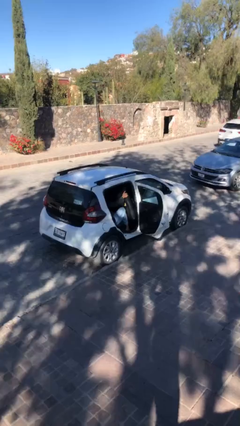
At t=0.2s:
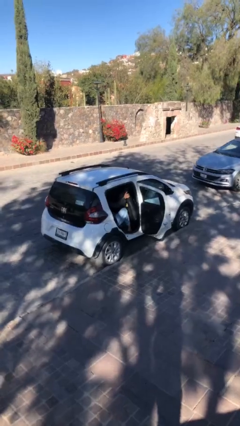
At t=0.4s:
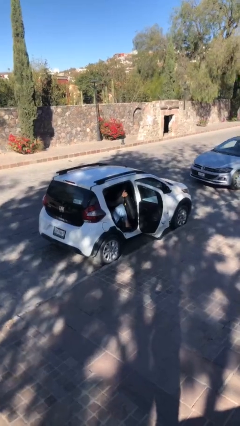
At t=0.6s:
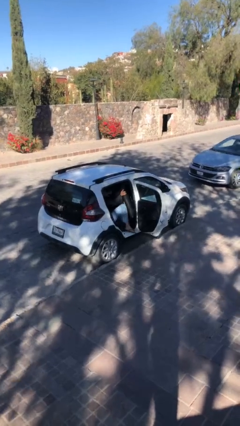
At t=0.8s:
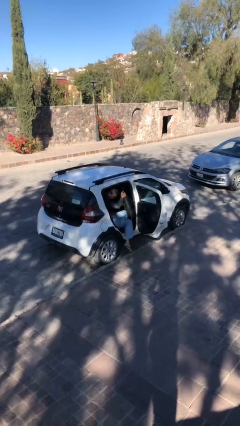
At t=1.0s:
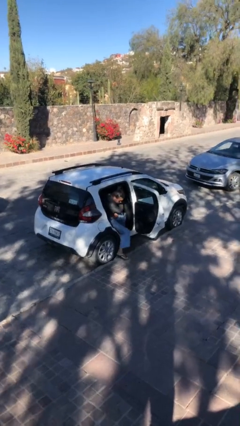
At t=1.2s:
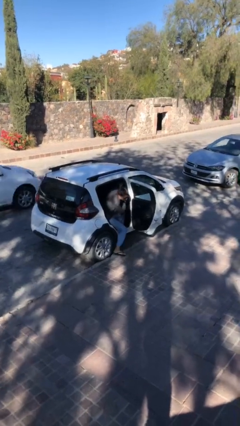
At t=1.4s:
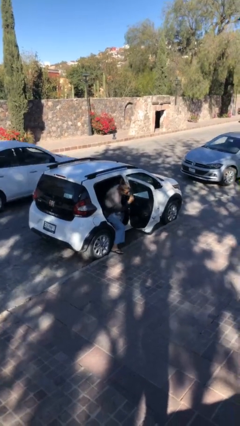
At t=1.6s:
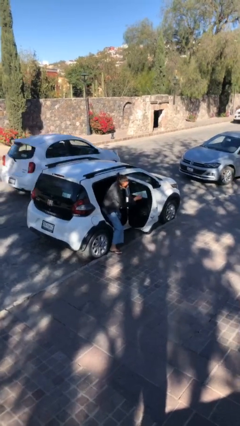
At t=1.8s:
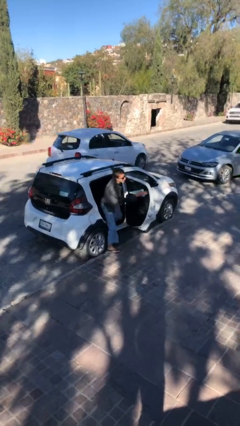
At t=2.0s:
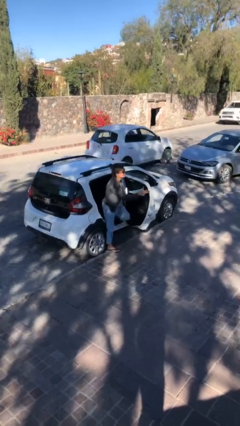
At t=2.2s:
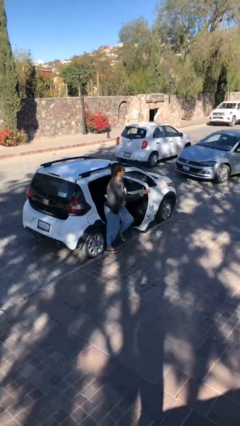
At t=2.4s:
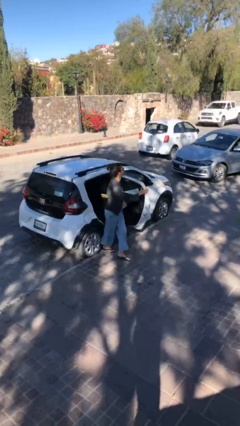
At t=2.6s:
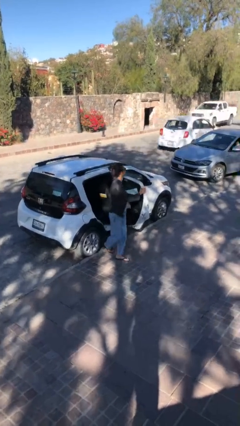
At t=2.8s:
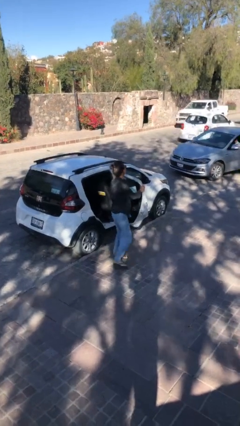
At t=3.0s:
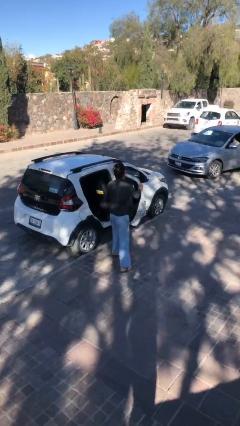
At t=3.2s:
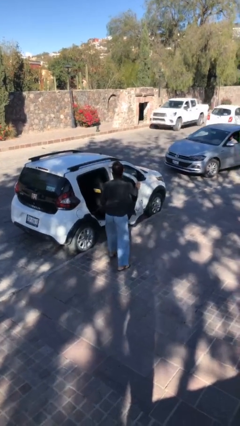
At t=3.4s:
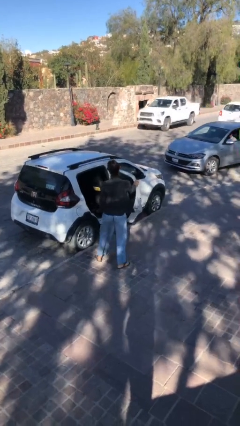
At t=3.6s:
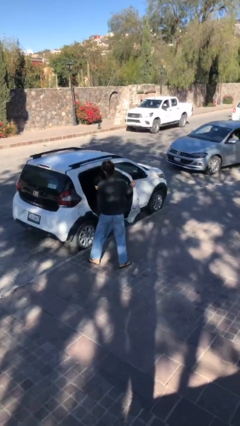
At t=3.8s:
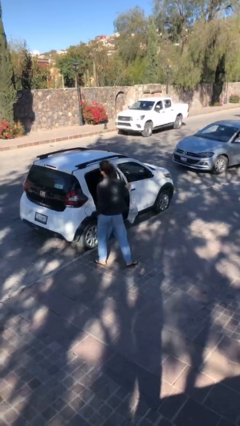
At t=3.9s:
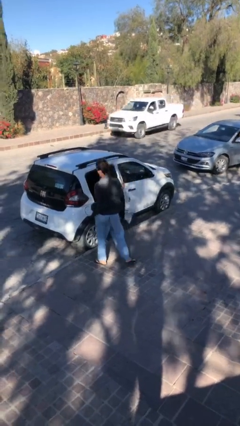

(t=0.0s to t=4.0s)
person exits car

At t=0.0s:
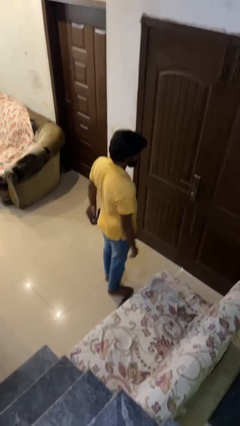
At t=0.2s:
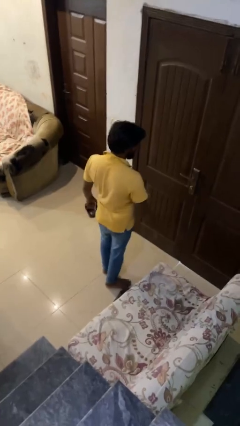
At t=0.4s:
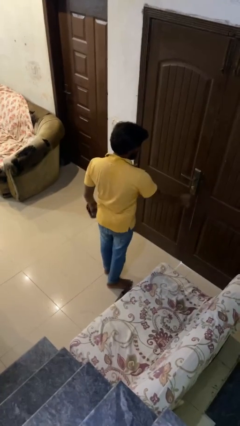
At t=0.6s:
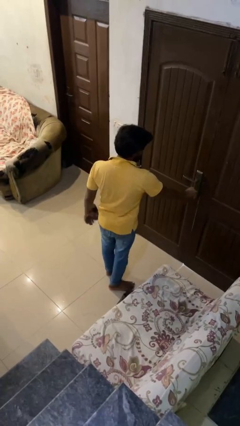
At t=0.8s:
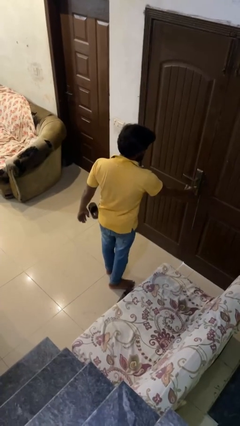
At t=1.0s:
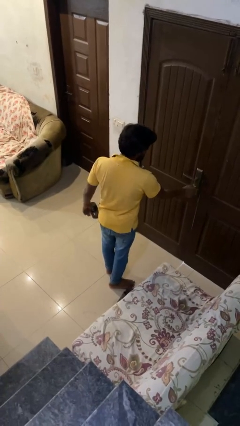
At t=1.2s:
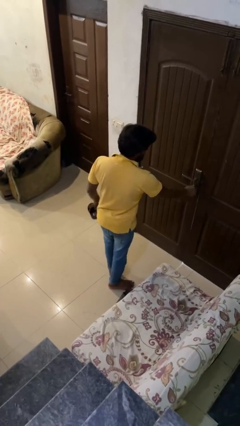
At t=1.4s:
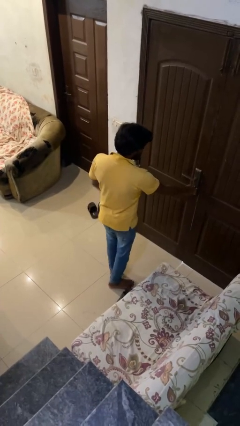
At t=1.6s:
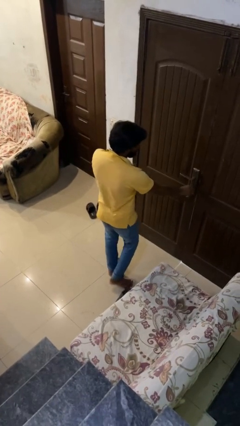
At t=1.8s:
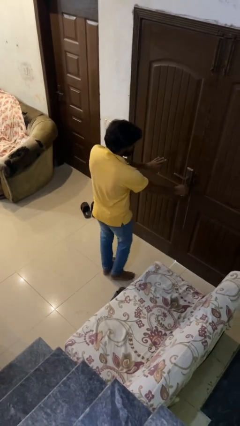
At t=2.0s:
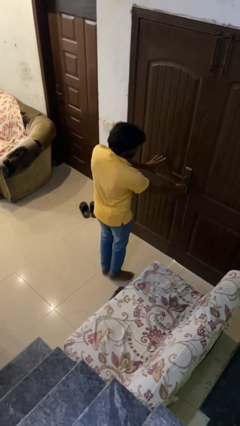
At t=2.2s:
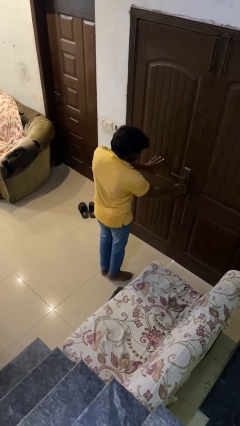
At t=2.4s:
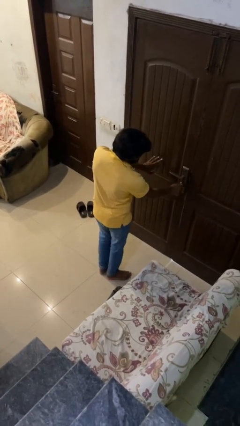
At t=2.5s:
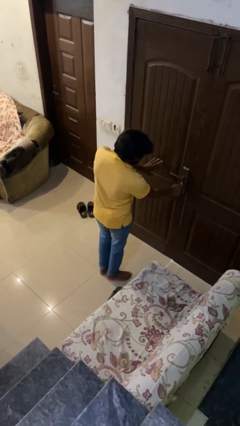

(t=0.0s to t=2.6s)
person locks door with keys

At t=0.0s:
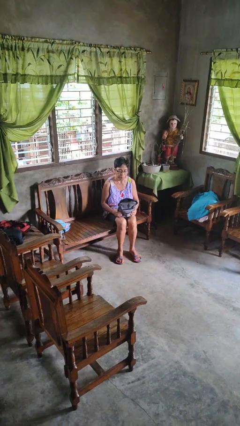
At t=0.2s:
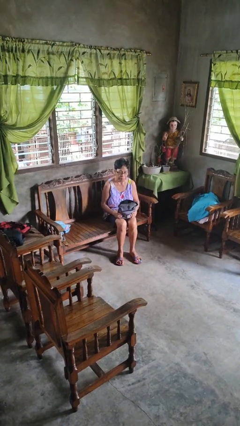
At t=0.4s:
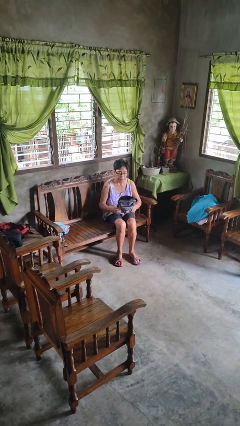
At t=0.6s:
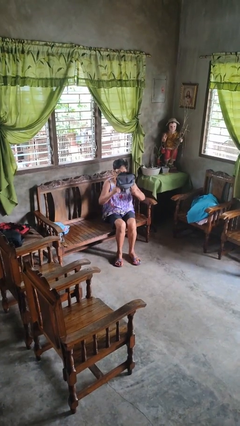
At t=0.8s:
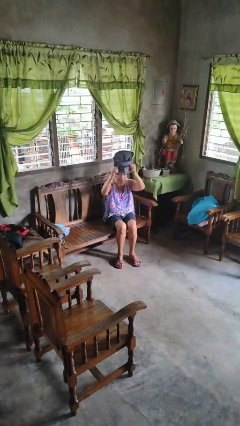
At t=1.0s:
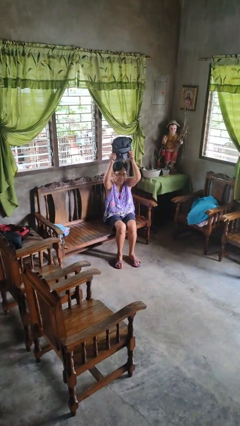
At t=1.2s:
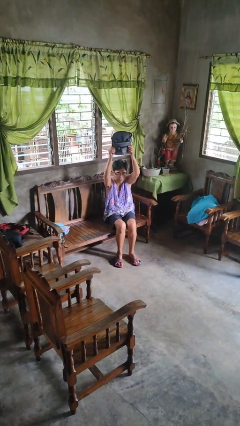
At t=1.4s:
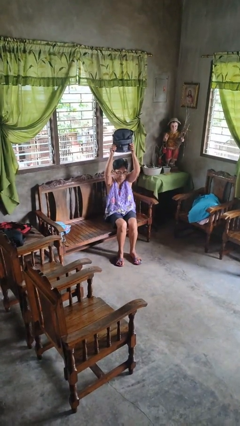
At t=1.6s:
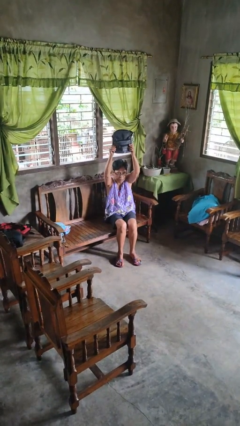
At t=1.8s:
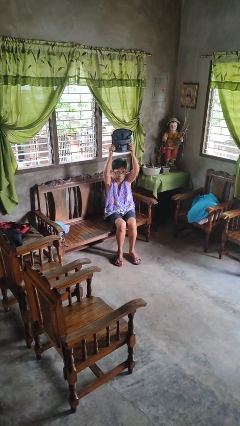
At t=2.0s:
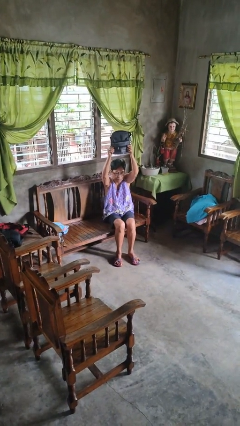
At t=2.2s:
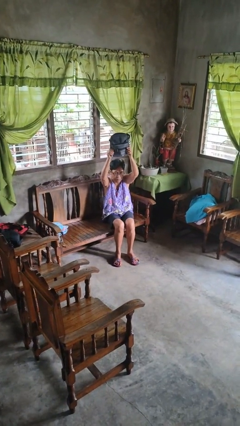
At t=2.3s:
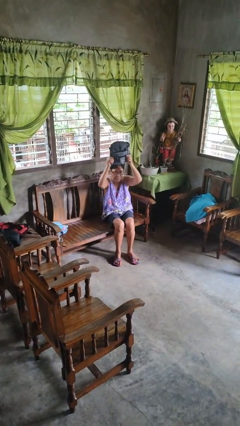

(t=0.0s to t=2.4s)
person holds object above head

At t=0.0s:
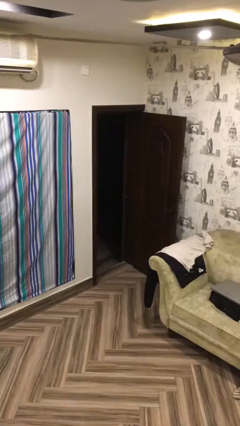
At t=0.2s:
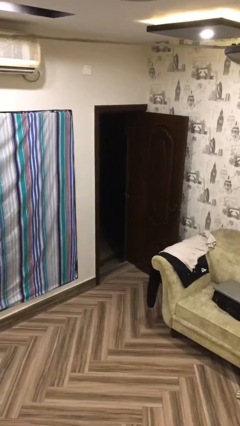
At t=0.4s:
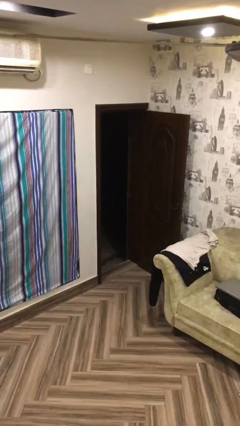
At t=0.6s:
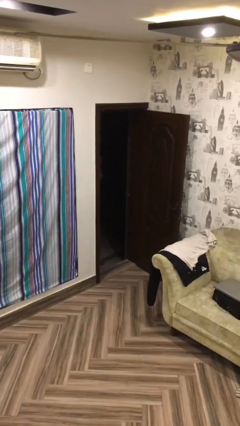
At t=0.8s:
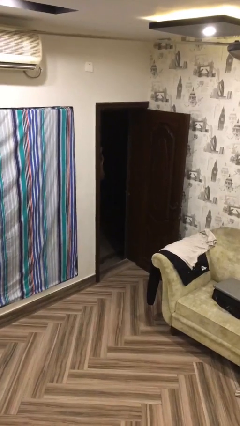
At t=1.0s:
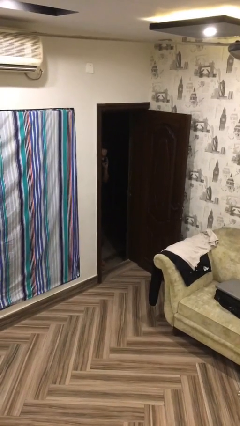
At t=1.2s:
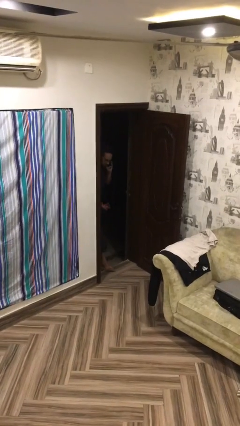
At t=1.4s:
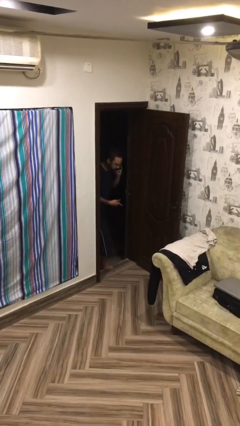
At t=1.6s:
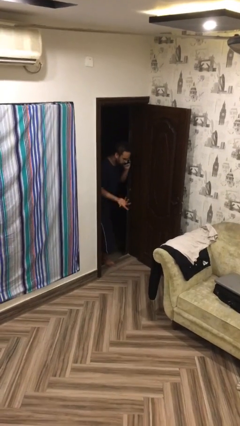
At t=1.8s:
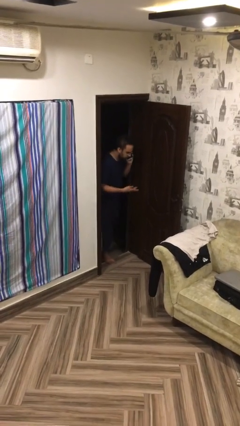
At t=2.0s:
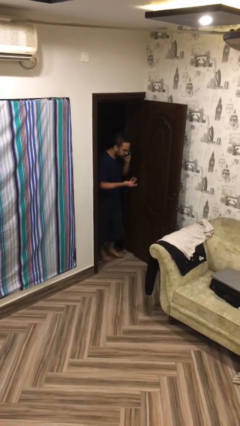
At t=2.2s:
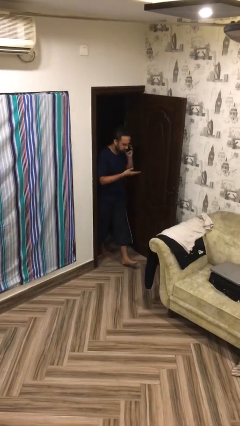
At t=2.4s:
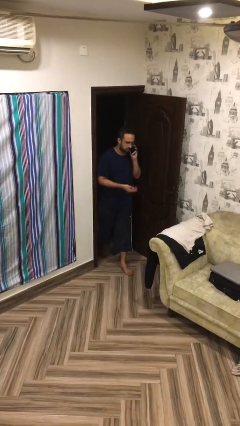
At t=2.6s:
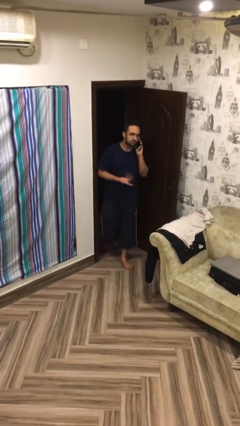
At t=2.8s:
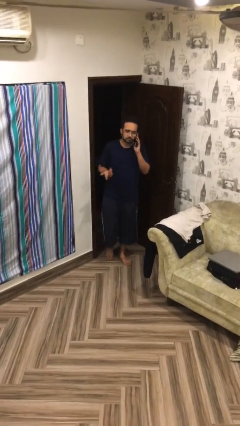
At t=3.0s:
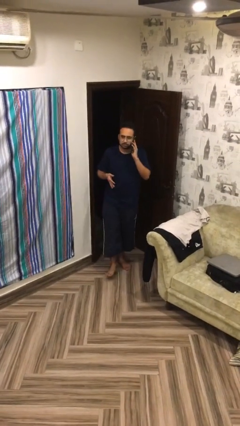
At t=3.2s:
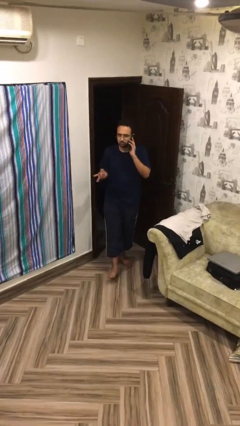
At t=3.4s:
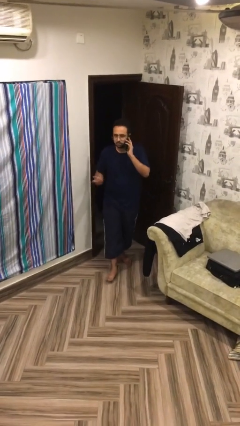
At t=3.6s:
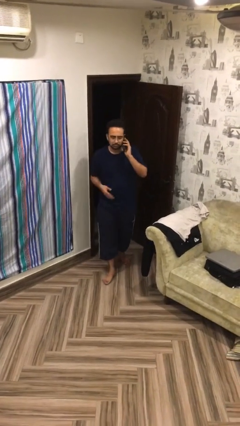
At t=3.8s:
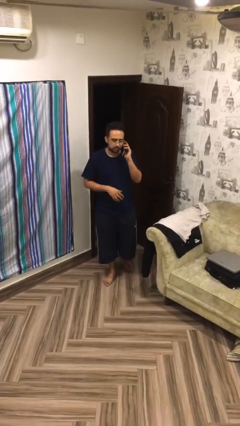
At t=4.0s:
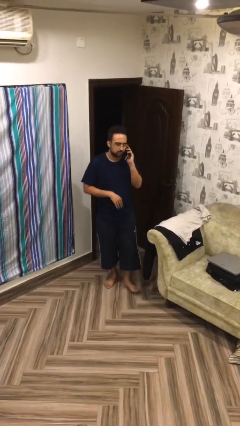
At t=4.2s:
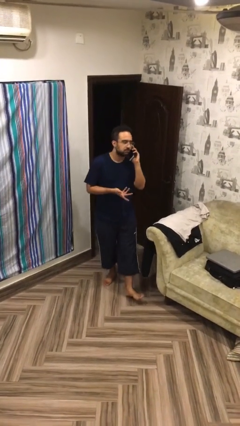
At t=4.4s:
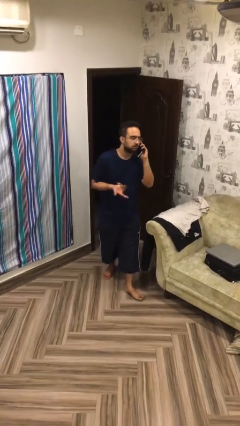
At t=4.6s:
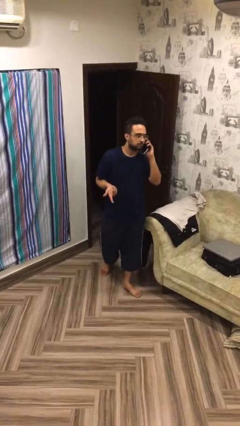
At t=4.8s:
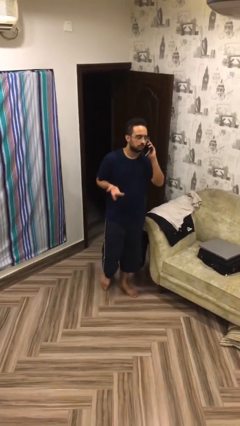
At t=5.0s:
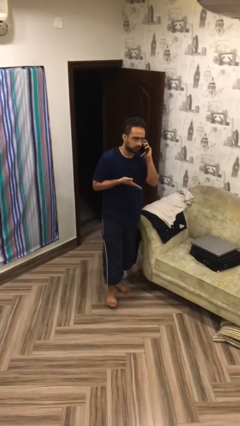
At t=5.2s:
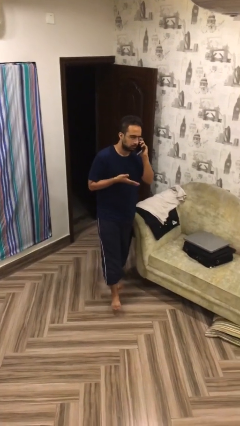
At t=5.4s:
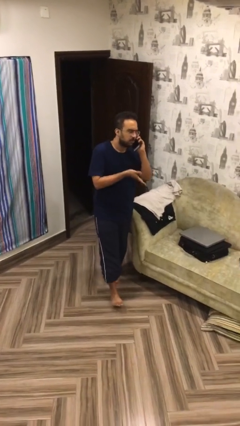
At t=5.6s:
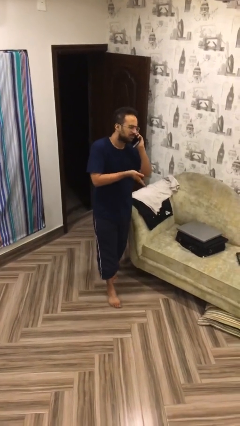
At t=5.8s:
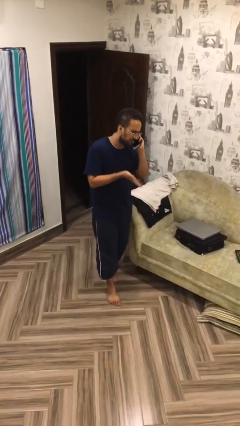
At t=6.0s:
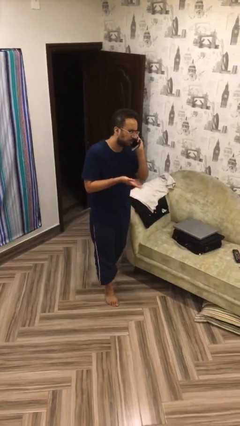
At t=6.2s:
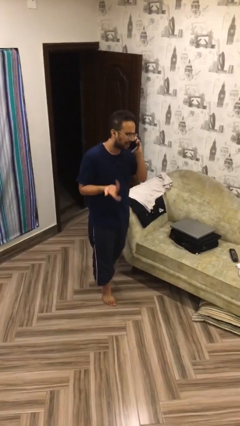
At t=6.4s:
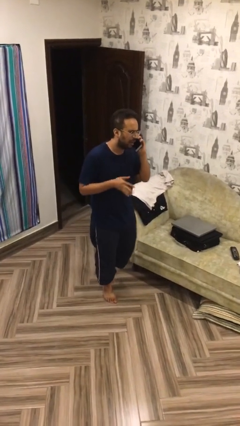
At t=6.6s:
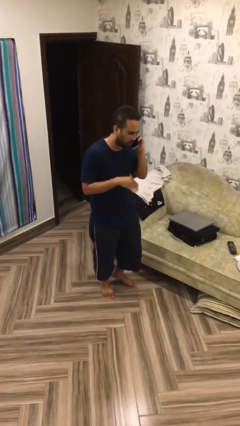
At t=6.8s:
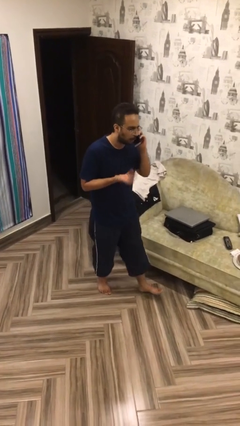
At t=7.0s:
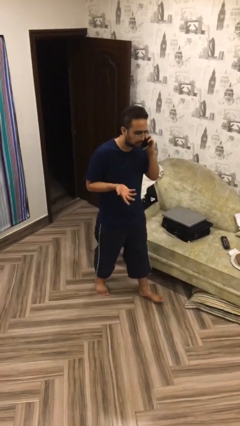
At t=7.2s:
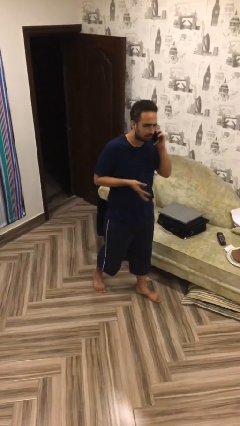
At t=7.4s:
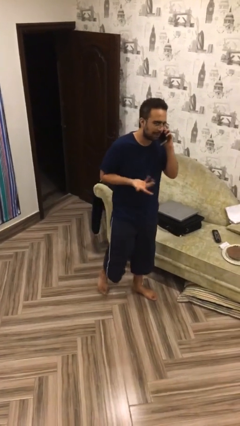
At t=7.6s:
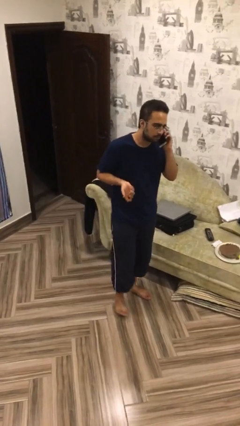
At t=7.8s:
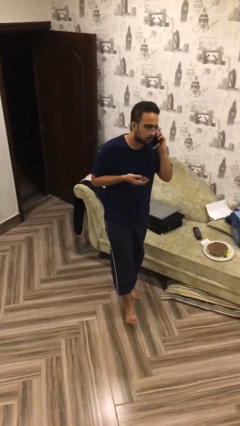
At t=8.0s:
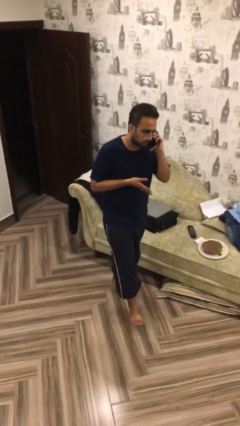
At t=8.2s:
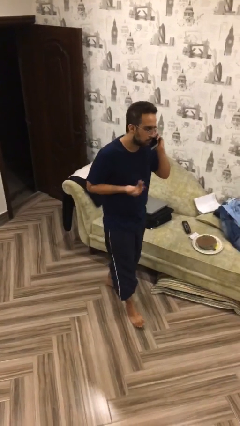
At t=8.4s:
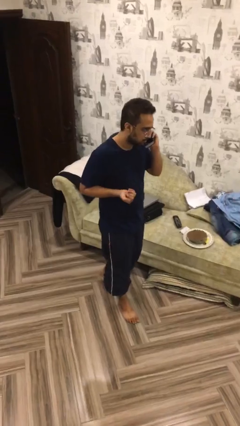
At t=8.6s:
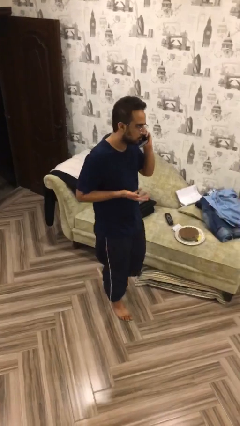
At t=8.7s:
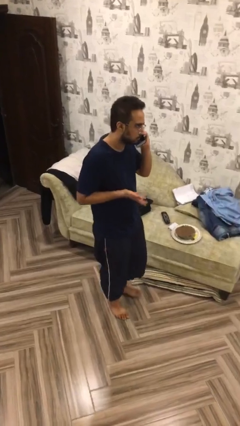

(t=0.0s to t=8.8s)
person enters scene through structure

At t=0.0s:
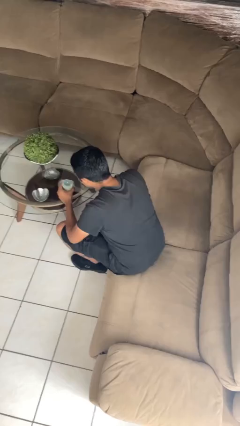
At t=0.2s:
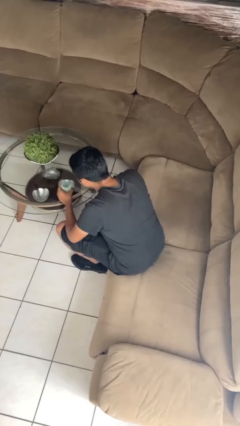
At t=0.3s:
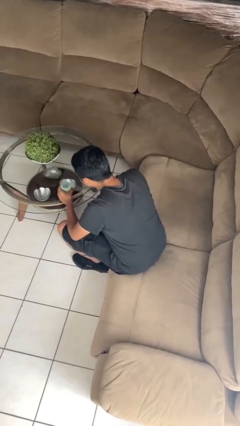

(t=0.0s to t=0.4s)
person extinguishes candle
